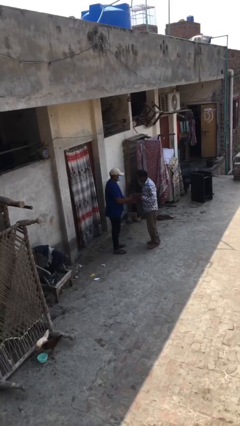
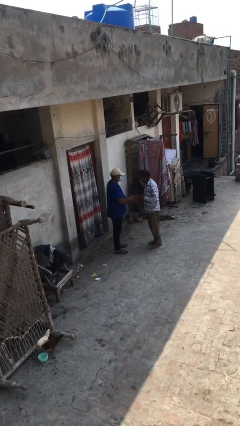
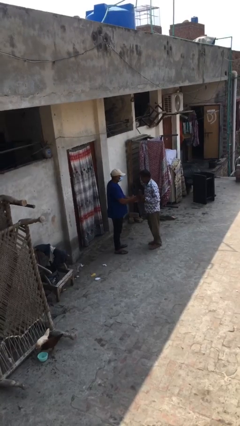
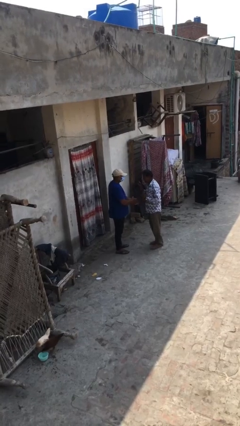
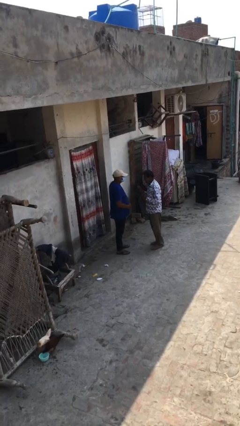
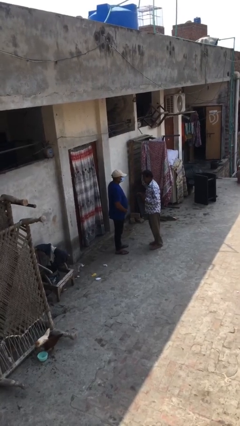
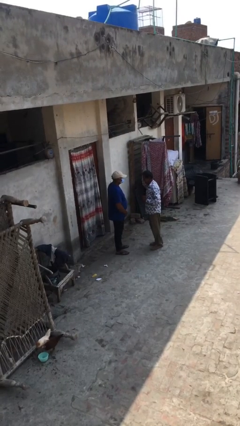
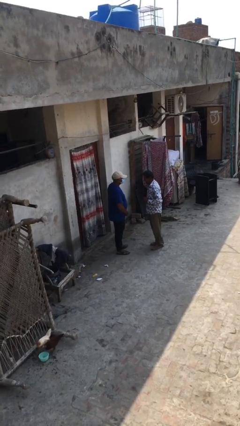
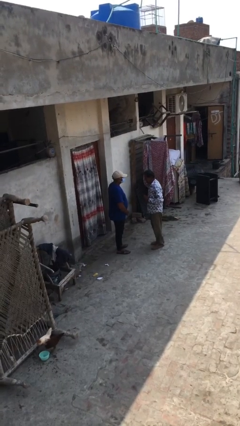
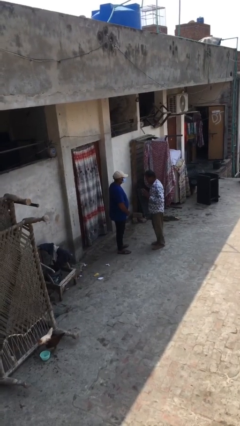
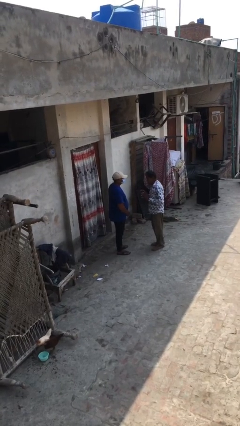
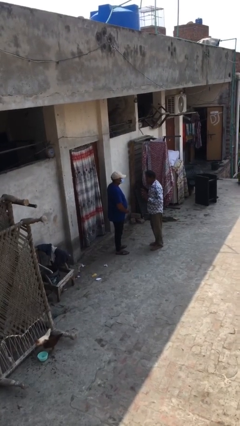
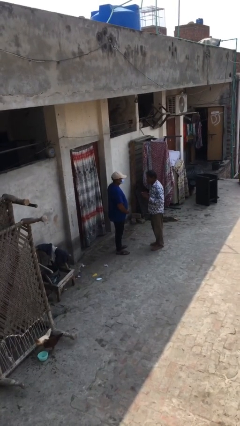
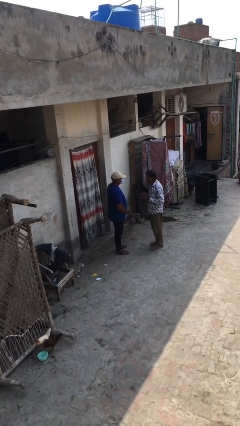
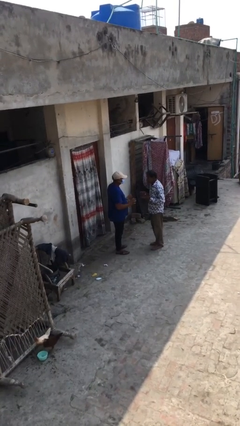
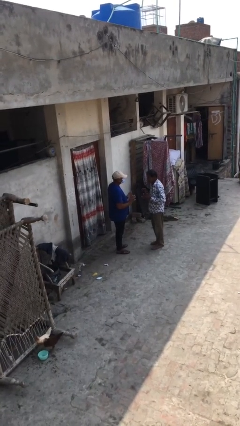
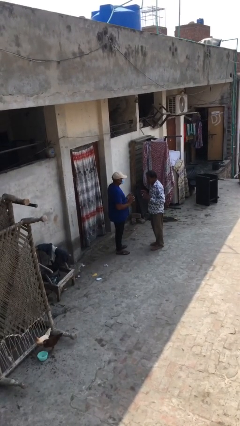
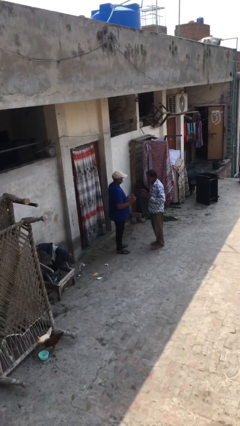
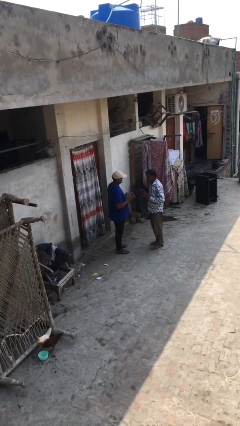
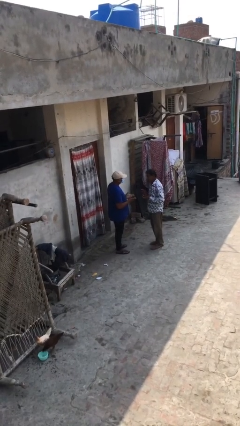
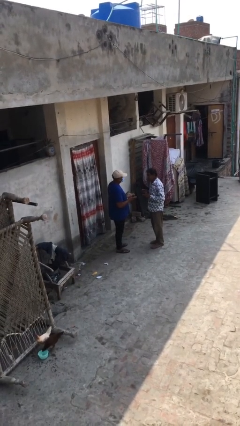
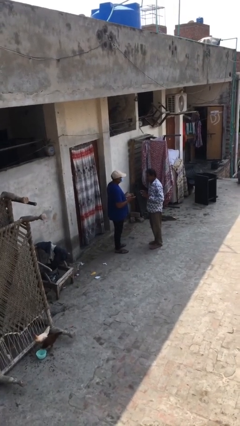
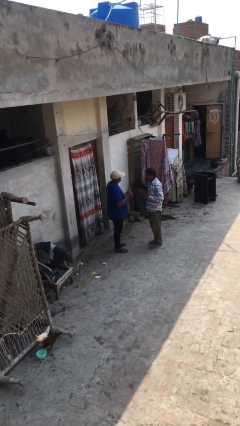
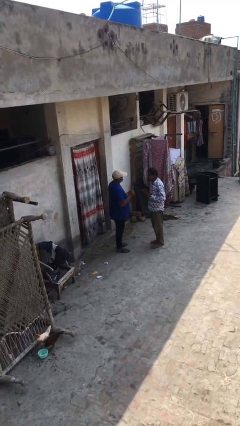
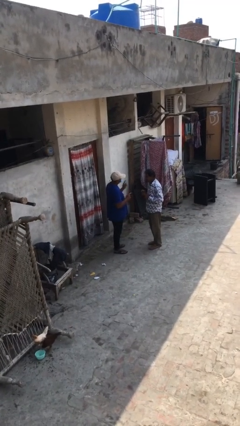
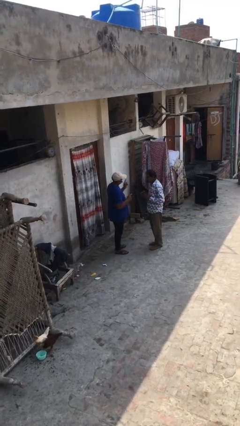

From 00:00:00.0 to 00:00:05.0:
person talks to person

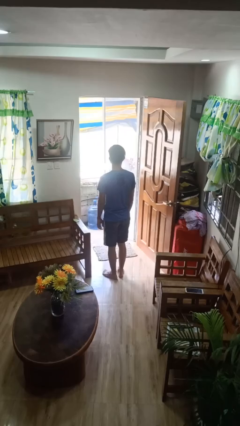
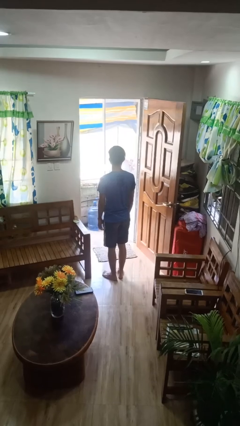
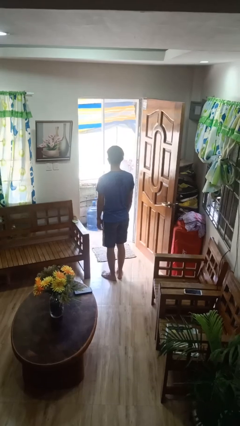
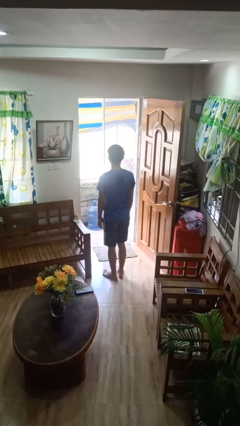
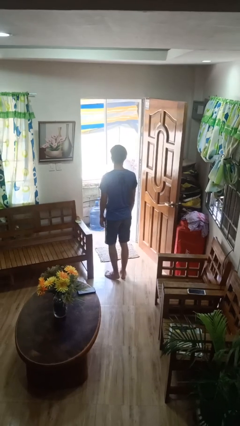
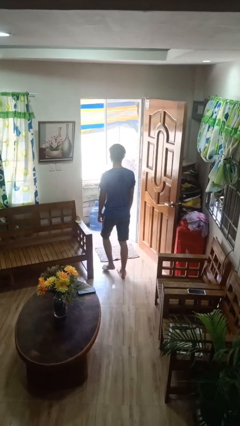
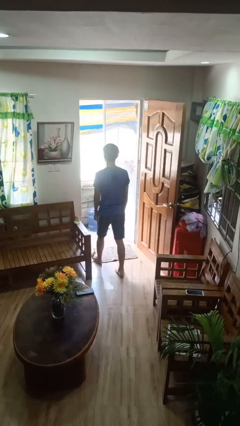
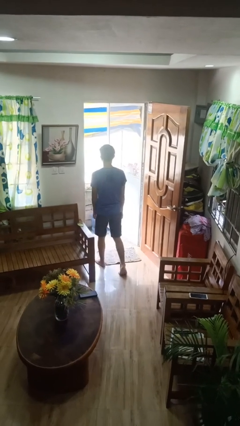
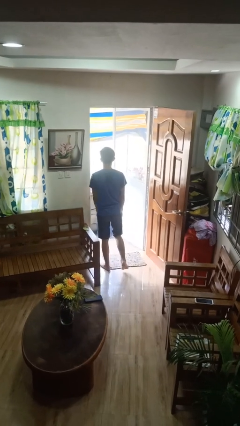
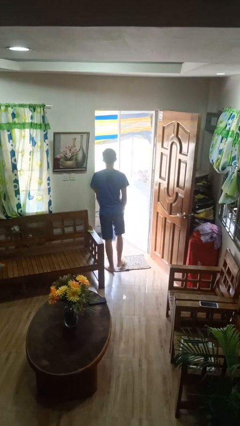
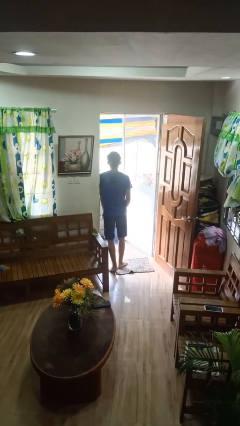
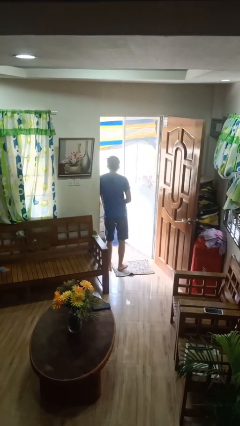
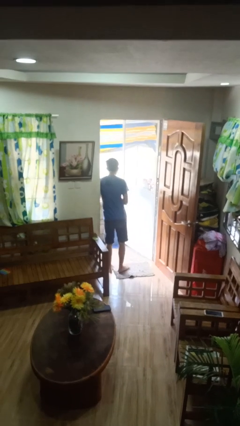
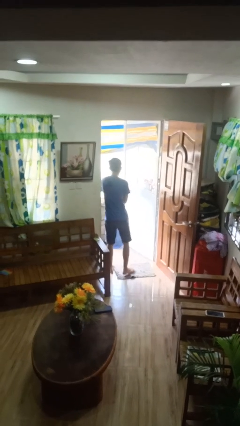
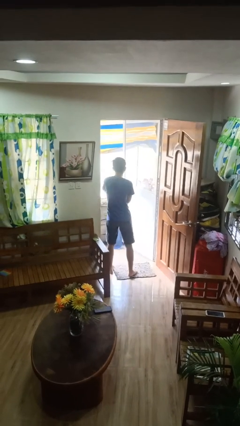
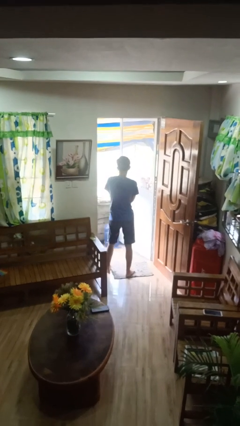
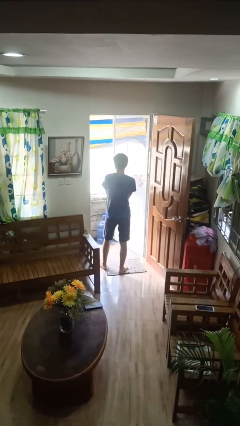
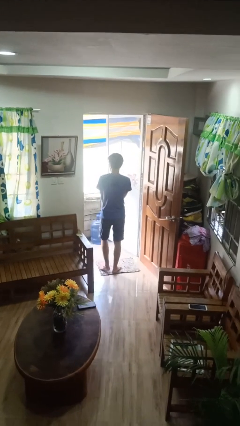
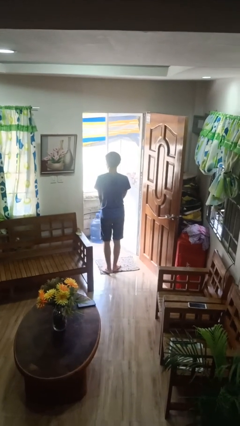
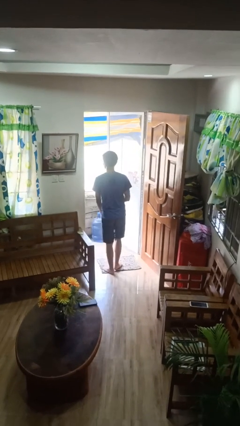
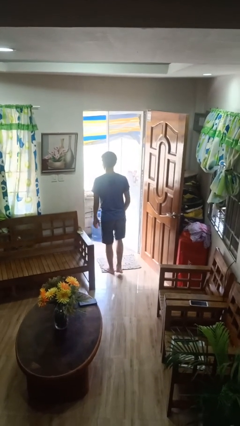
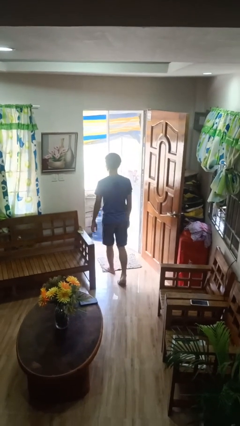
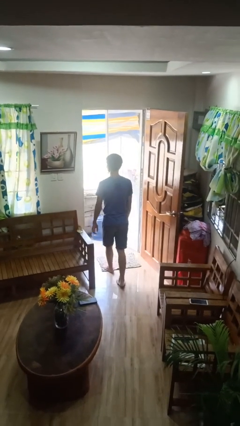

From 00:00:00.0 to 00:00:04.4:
person bumps into wall

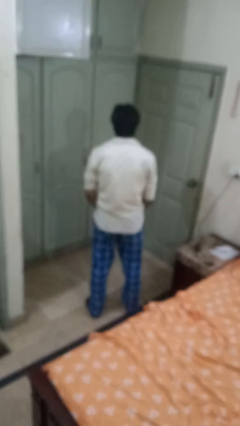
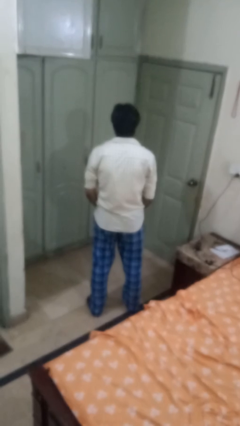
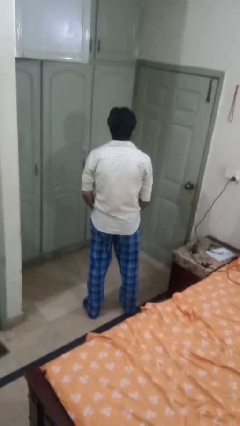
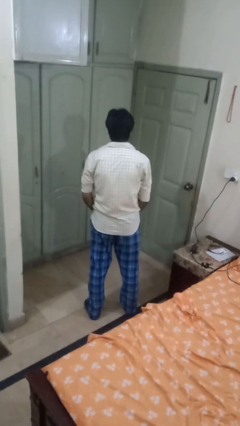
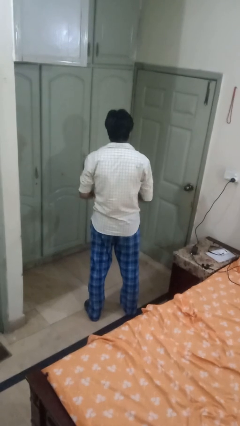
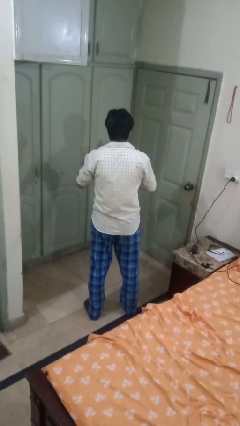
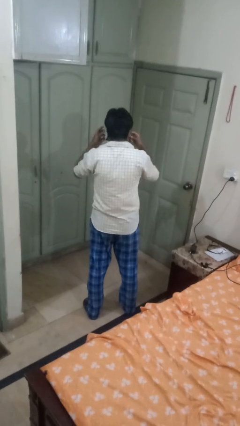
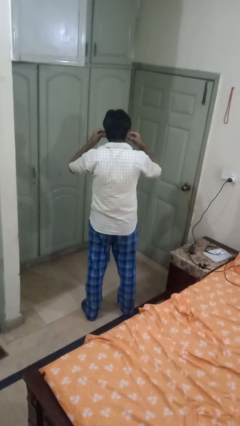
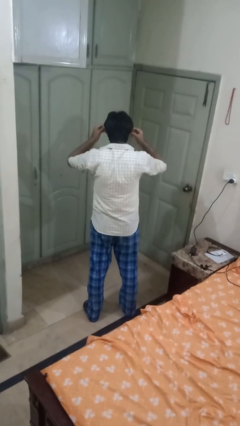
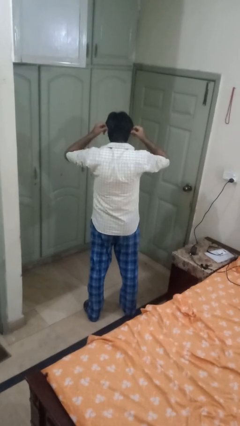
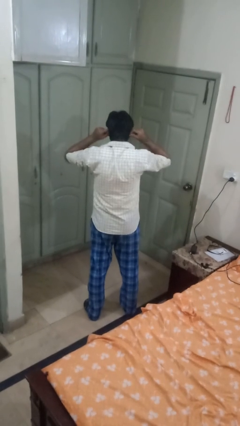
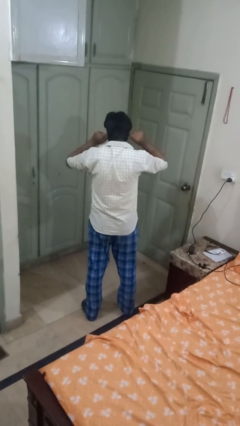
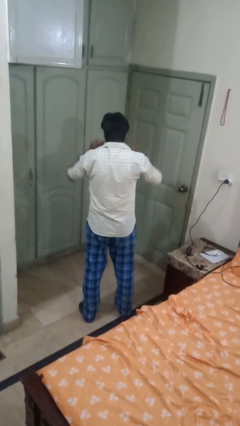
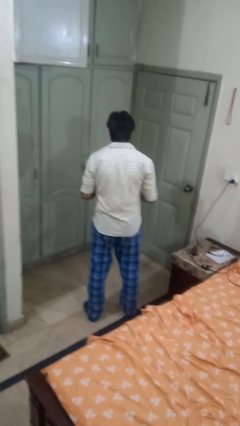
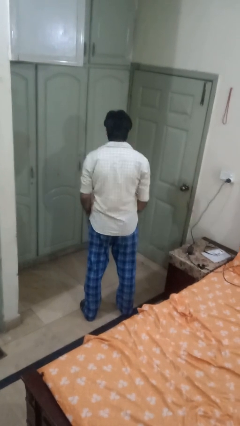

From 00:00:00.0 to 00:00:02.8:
person puts on facemask

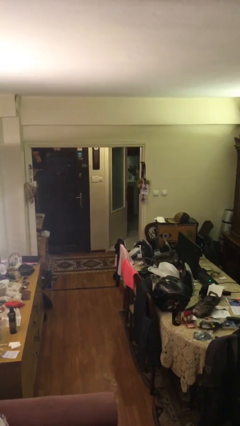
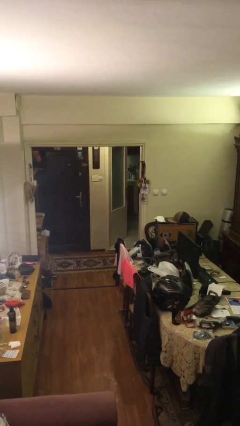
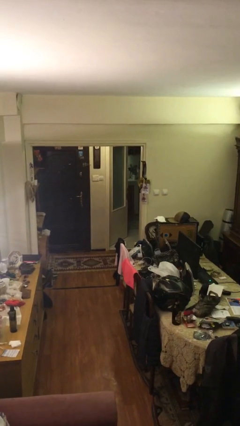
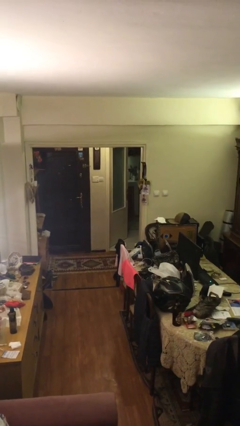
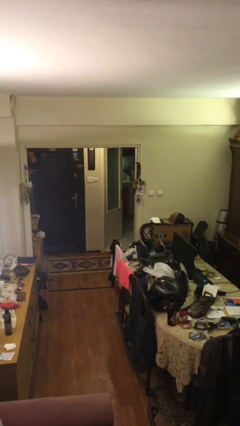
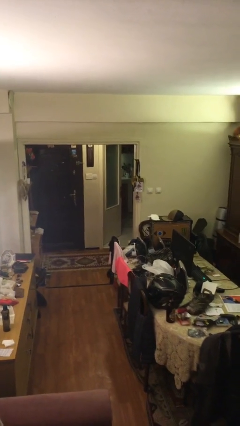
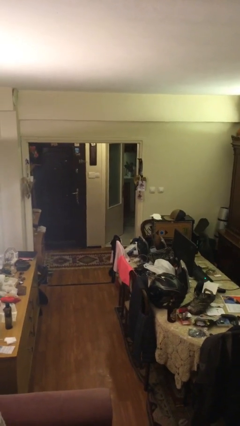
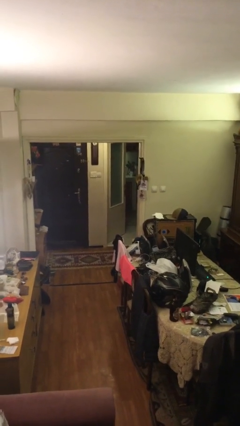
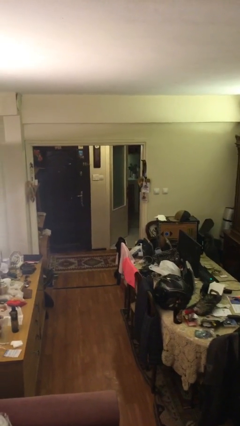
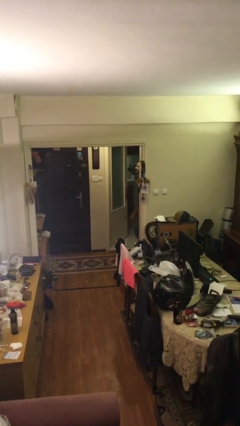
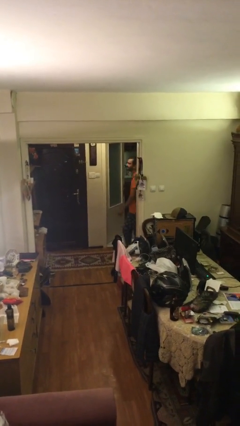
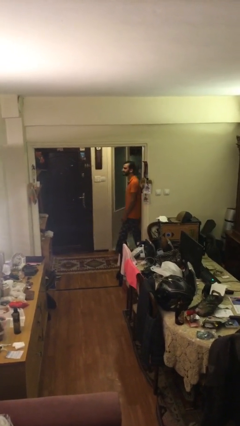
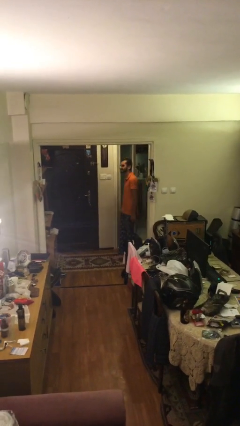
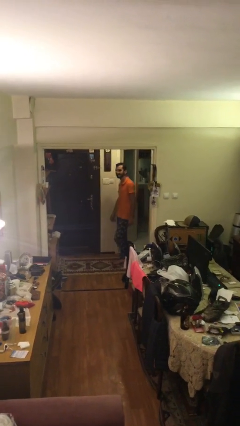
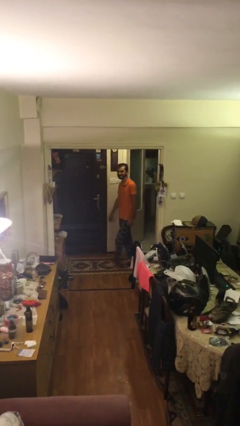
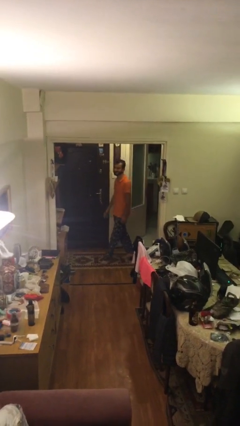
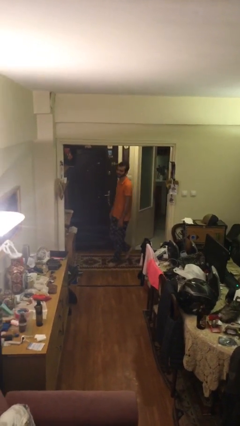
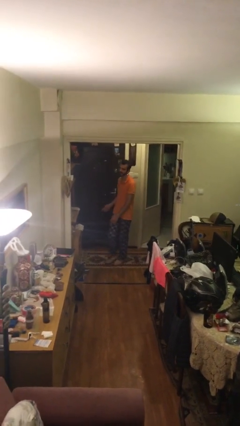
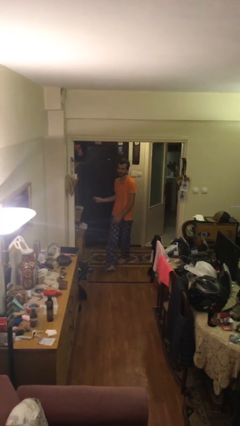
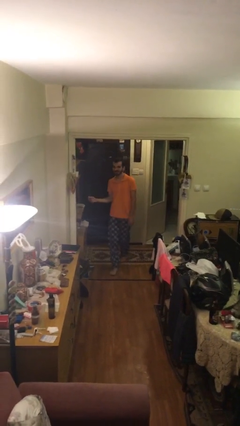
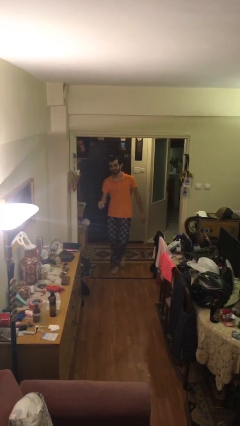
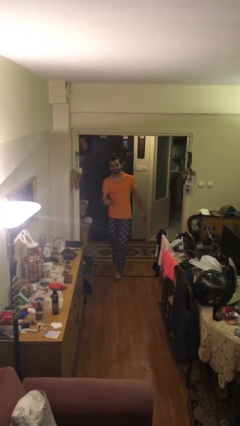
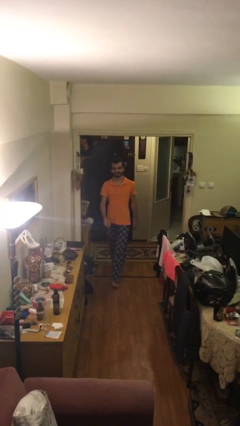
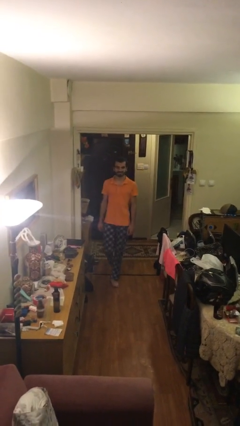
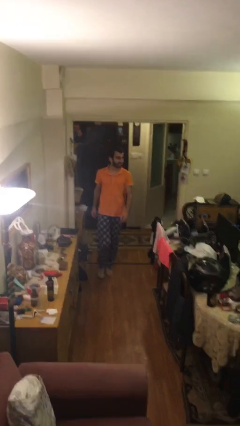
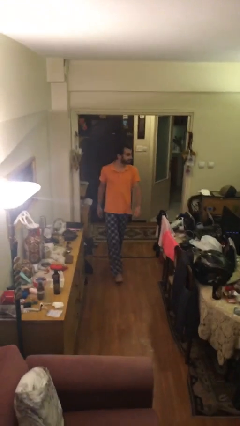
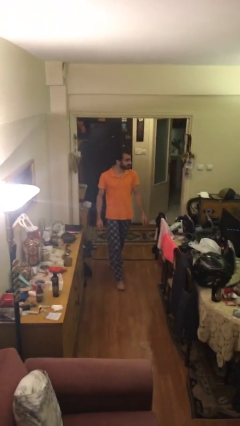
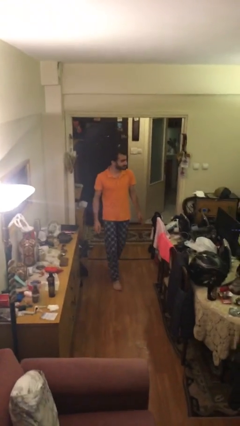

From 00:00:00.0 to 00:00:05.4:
person enters scene through structure
